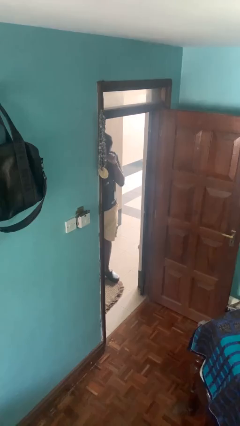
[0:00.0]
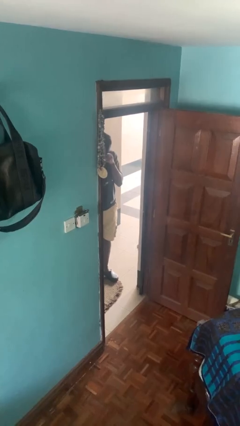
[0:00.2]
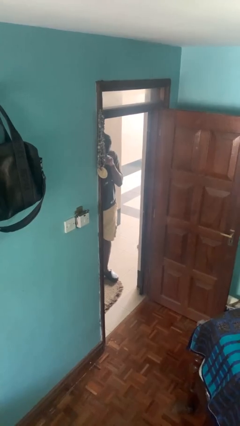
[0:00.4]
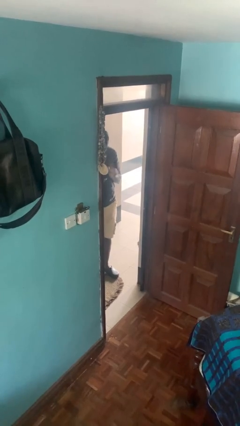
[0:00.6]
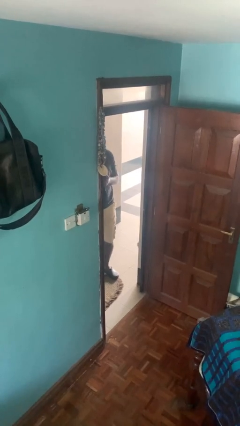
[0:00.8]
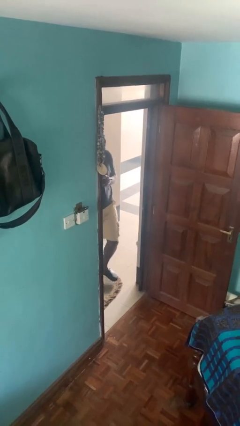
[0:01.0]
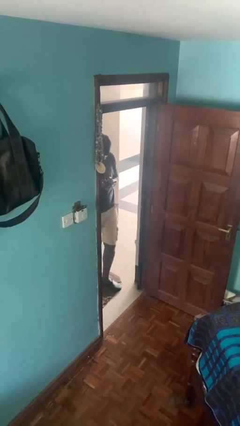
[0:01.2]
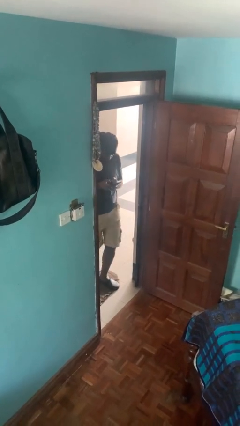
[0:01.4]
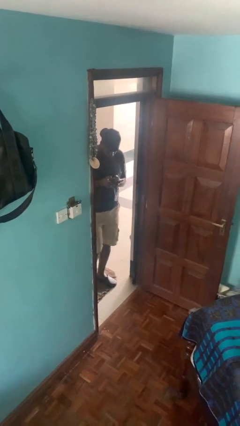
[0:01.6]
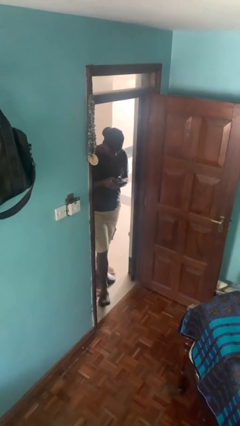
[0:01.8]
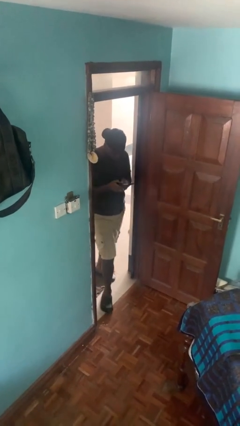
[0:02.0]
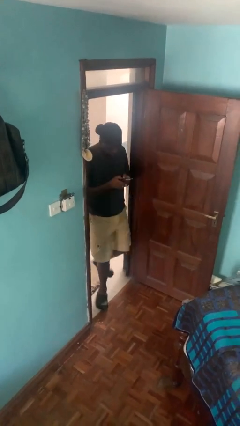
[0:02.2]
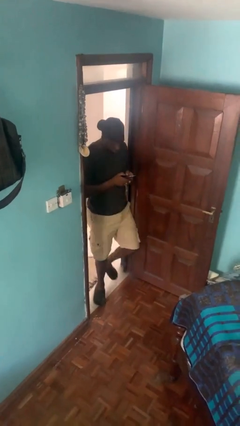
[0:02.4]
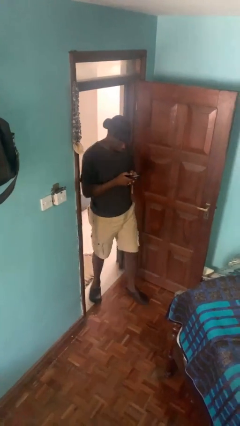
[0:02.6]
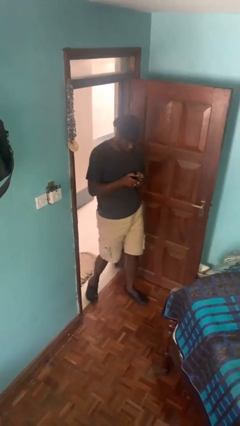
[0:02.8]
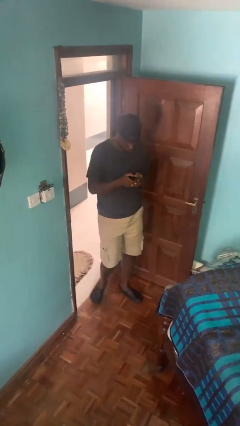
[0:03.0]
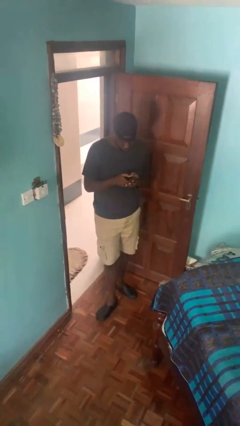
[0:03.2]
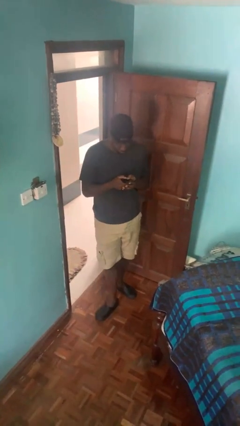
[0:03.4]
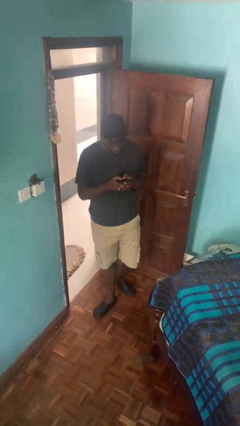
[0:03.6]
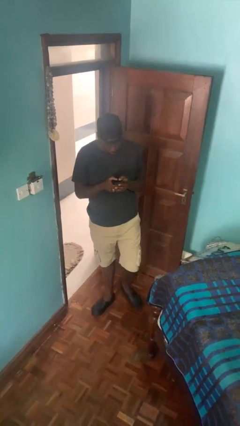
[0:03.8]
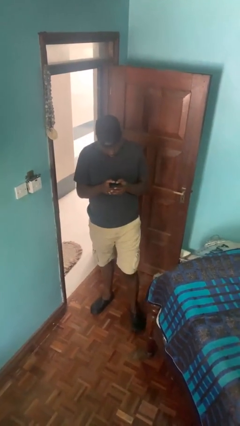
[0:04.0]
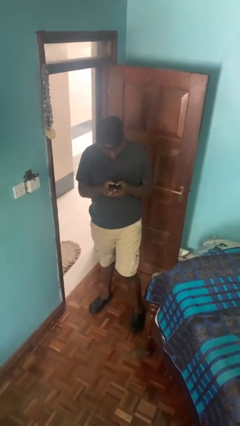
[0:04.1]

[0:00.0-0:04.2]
person enters scene through structure

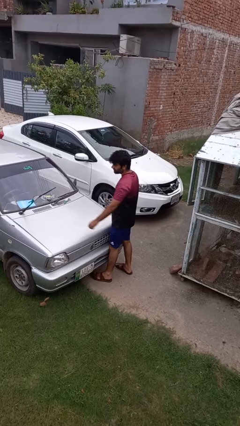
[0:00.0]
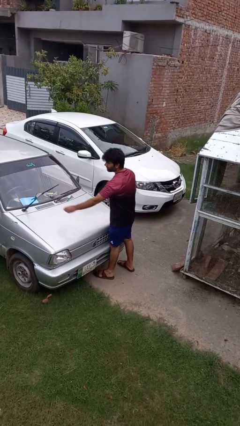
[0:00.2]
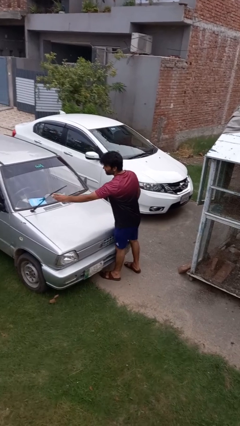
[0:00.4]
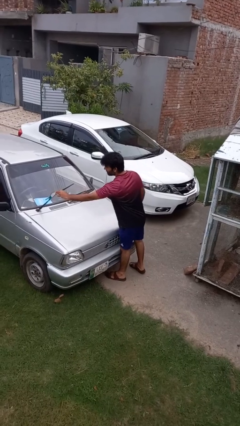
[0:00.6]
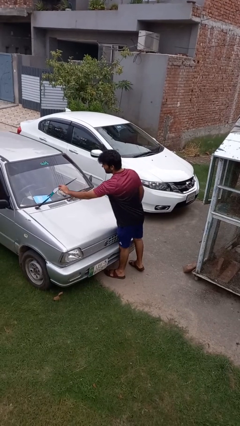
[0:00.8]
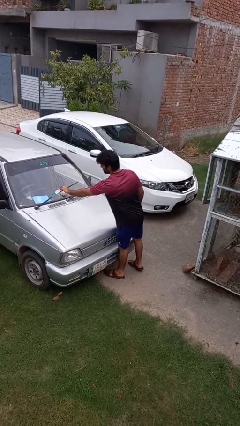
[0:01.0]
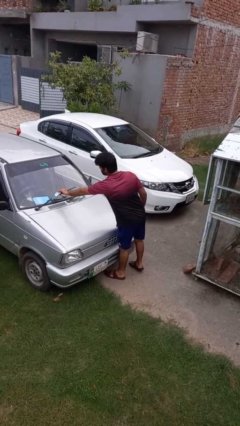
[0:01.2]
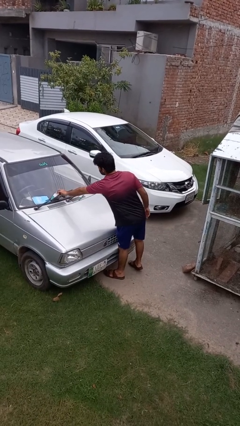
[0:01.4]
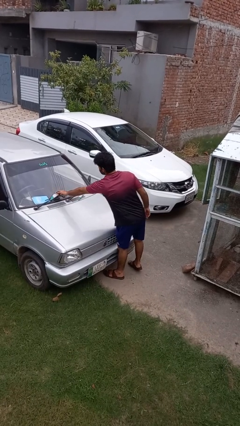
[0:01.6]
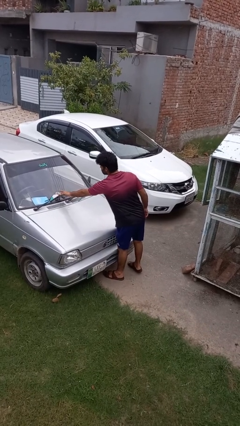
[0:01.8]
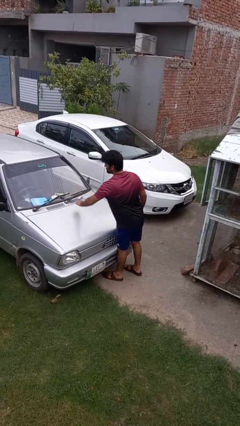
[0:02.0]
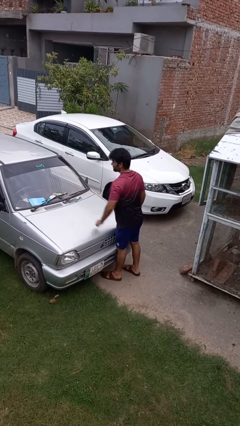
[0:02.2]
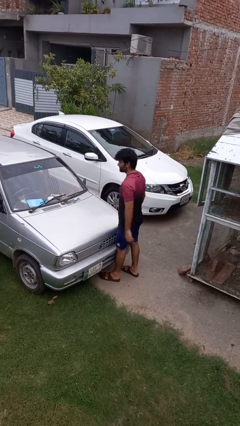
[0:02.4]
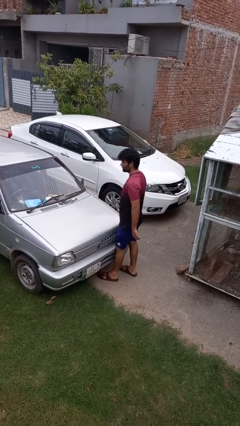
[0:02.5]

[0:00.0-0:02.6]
person flips down car wipers

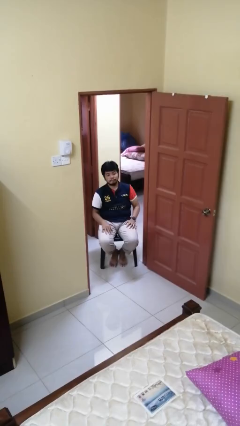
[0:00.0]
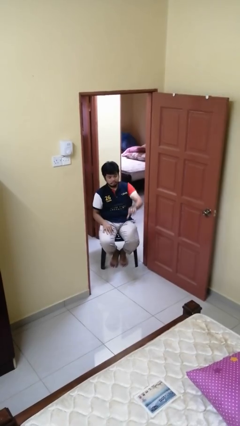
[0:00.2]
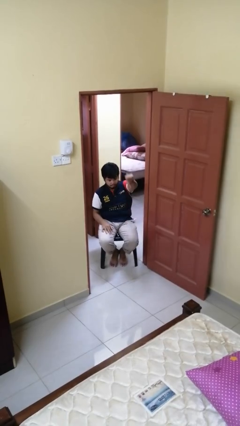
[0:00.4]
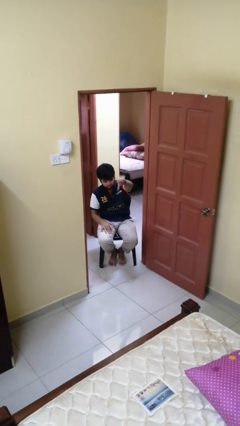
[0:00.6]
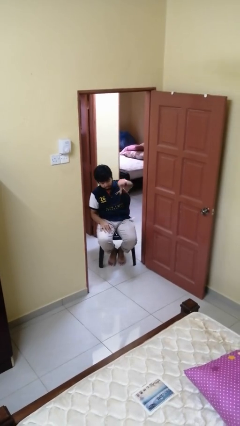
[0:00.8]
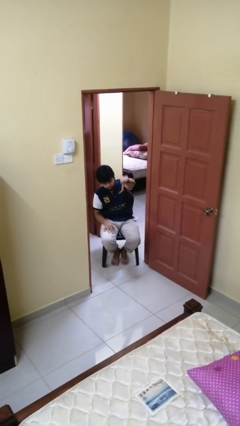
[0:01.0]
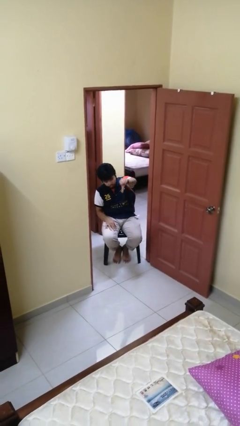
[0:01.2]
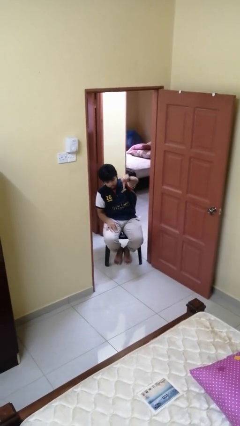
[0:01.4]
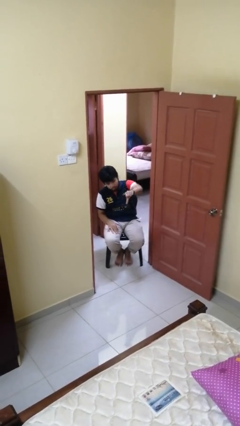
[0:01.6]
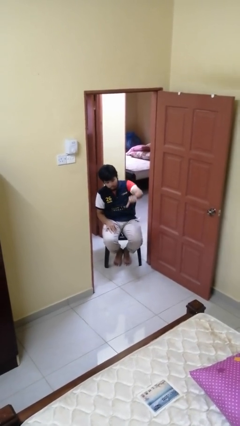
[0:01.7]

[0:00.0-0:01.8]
person gestures thumbs down

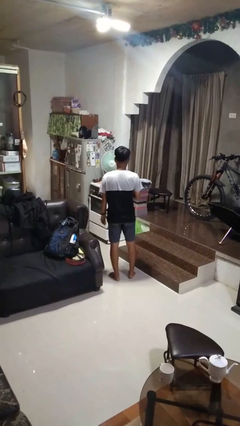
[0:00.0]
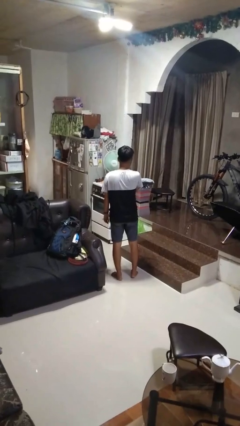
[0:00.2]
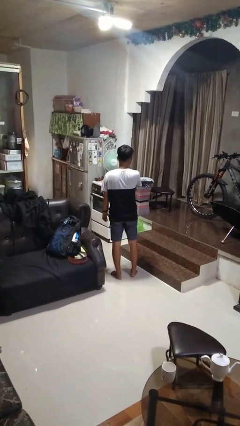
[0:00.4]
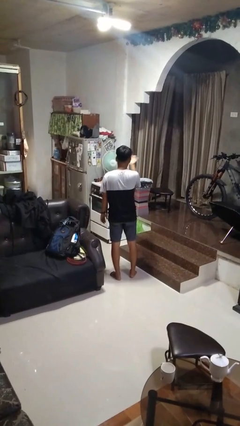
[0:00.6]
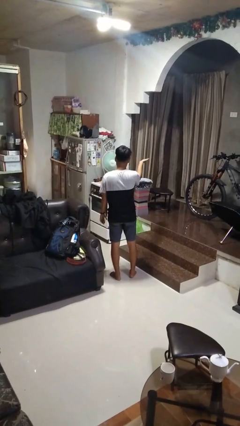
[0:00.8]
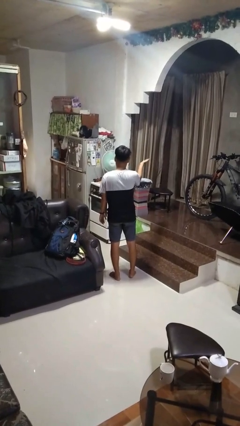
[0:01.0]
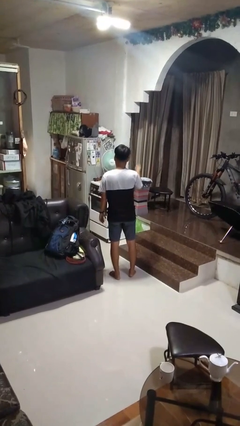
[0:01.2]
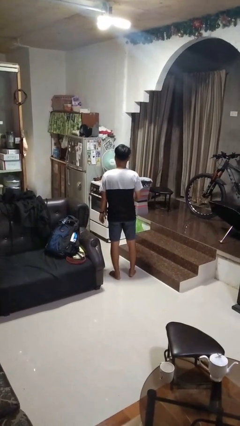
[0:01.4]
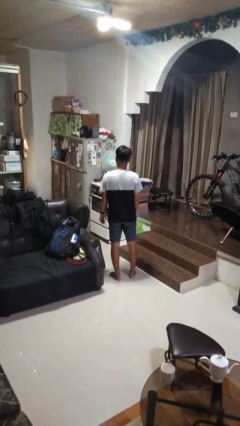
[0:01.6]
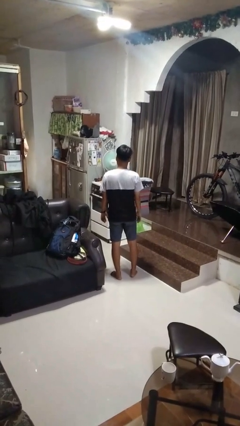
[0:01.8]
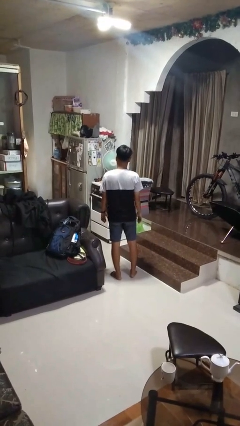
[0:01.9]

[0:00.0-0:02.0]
person gestures blow kiss

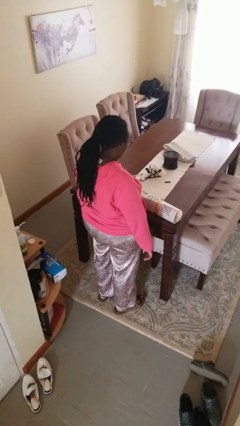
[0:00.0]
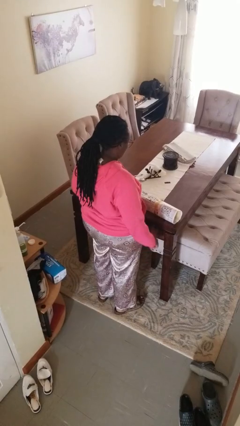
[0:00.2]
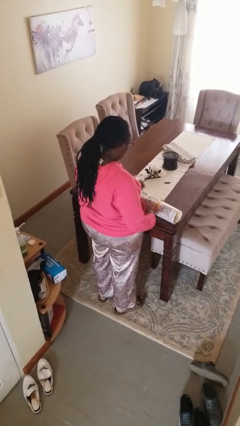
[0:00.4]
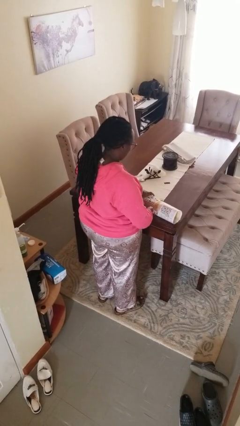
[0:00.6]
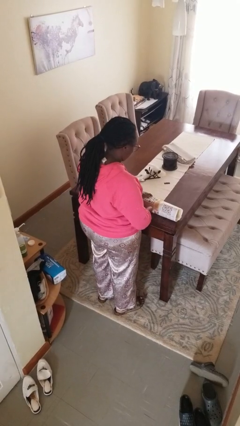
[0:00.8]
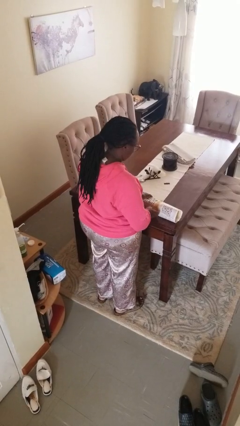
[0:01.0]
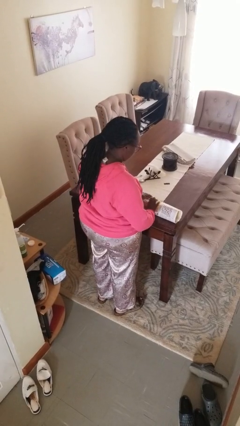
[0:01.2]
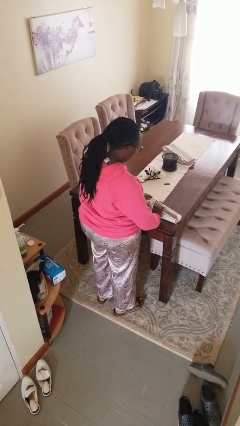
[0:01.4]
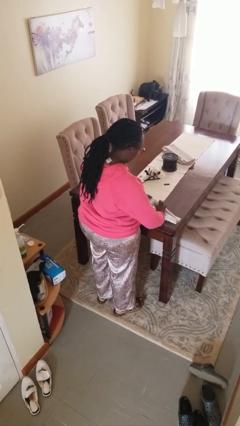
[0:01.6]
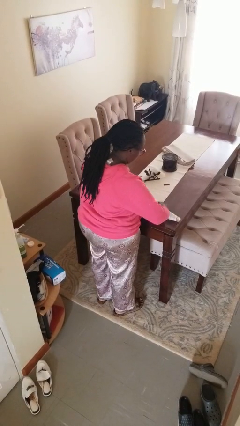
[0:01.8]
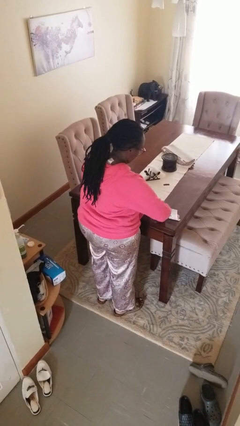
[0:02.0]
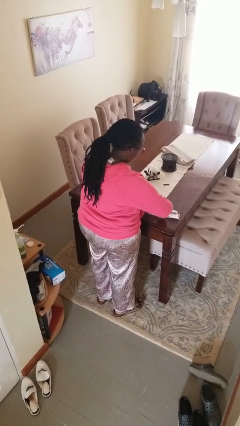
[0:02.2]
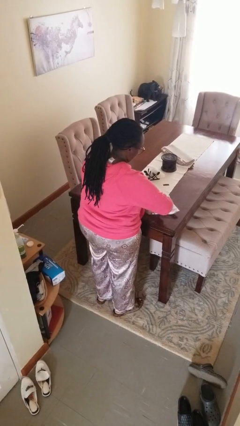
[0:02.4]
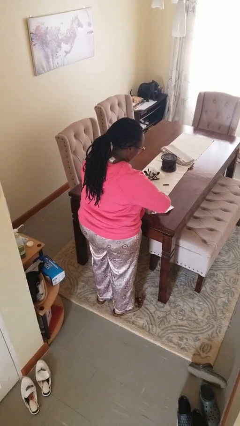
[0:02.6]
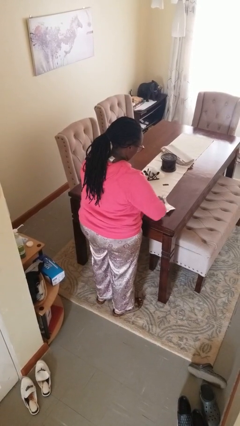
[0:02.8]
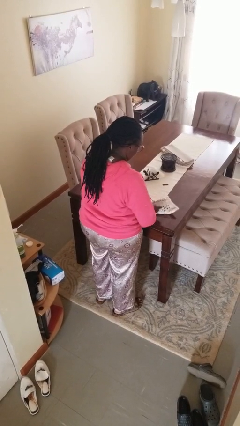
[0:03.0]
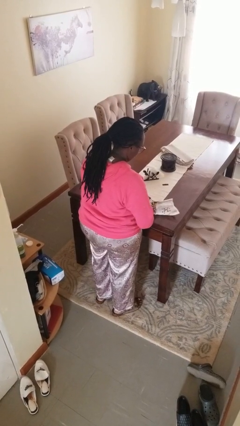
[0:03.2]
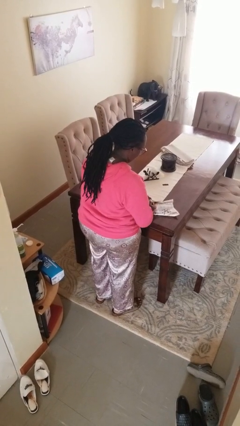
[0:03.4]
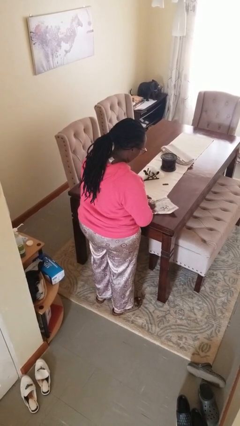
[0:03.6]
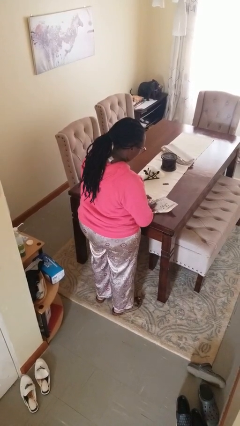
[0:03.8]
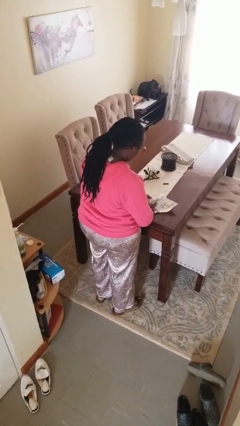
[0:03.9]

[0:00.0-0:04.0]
person wraps box

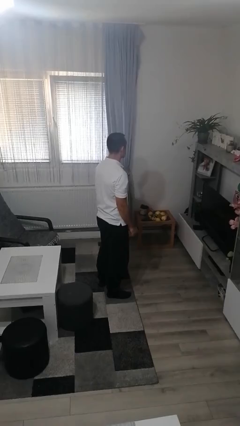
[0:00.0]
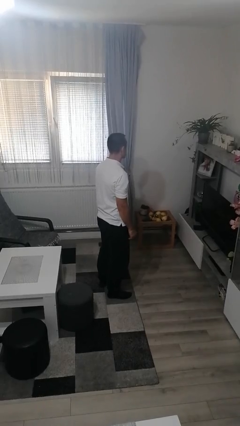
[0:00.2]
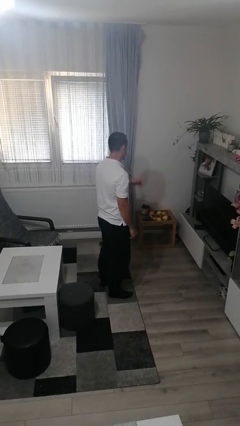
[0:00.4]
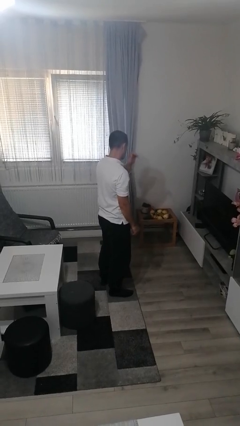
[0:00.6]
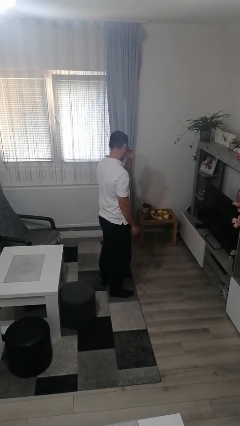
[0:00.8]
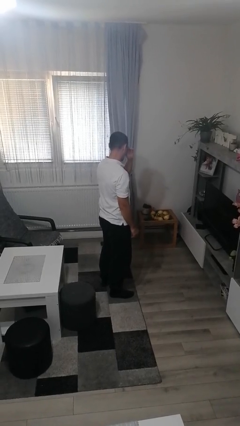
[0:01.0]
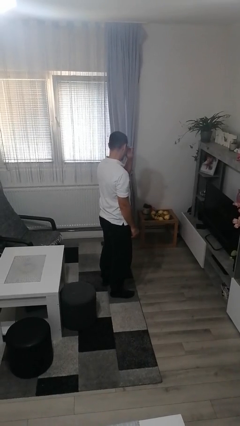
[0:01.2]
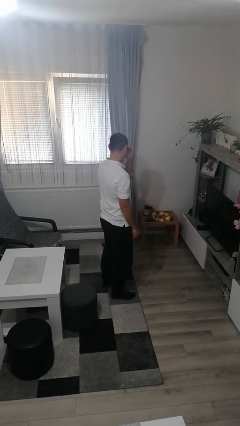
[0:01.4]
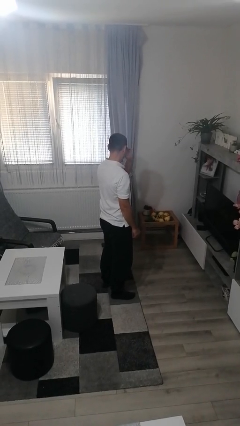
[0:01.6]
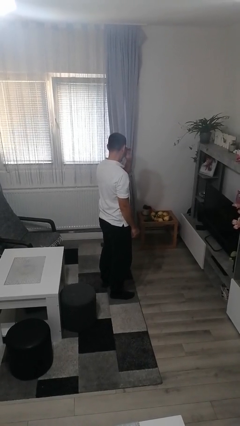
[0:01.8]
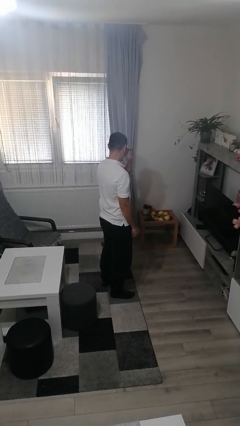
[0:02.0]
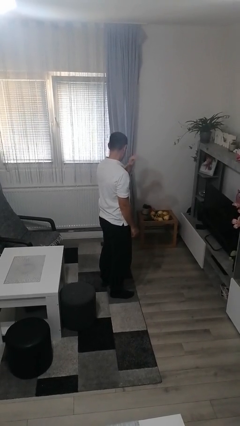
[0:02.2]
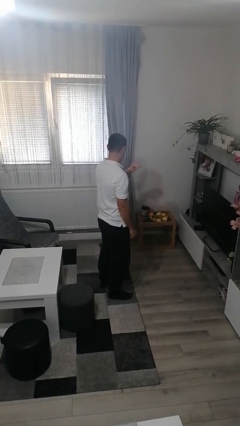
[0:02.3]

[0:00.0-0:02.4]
person rubs eyes

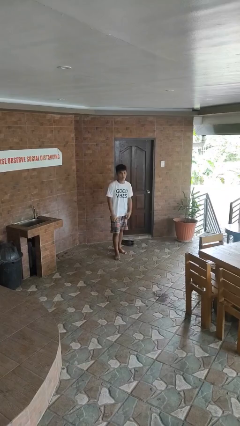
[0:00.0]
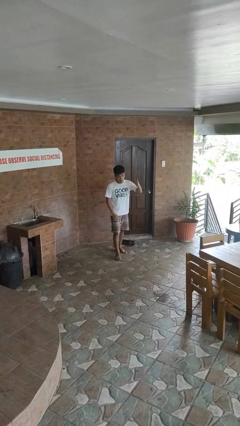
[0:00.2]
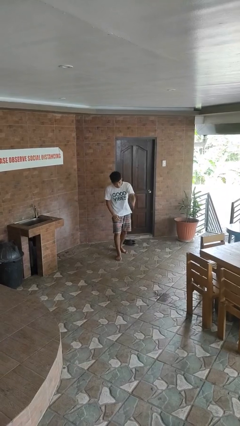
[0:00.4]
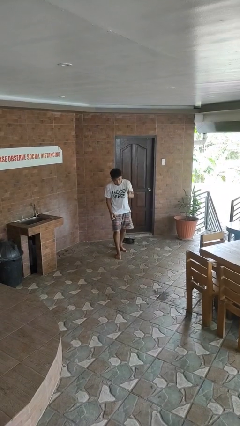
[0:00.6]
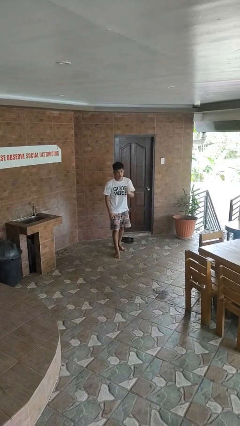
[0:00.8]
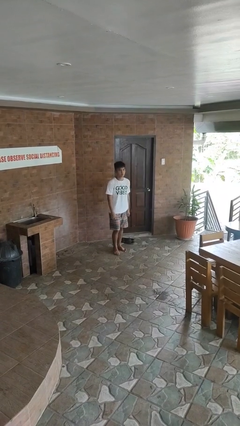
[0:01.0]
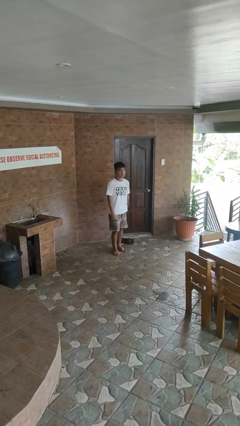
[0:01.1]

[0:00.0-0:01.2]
person karate chop
